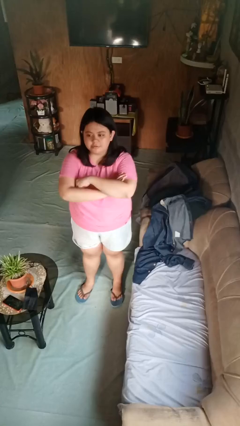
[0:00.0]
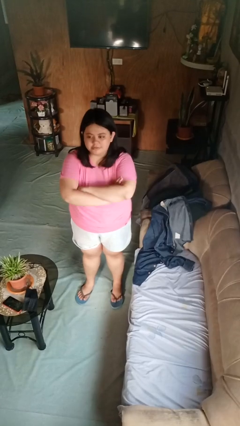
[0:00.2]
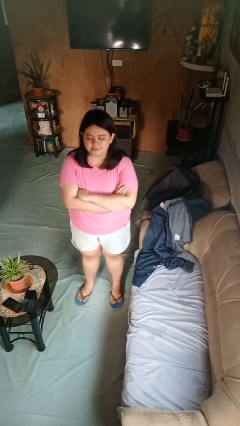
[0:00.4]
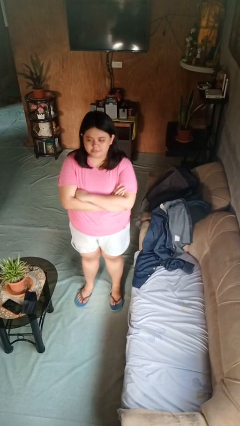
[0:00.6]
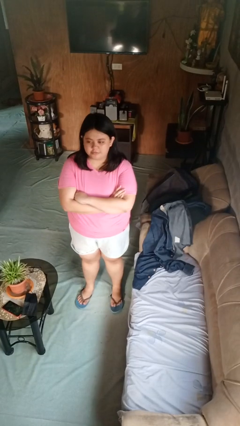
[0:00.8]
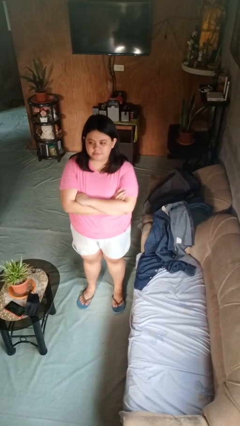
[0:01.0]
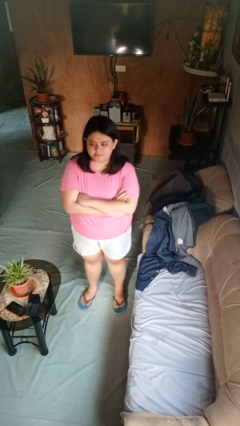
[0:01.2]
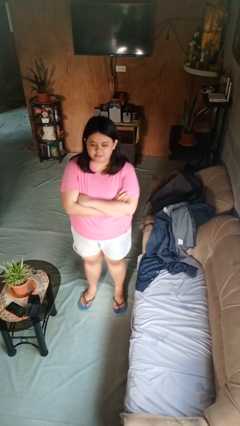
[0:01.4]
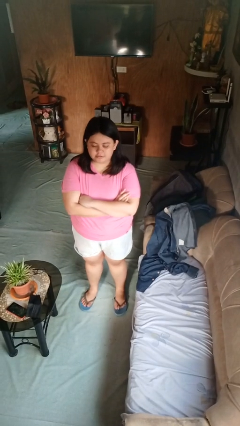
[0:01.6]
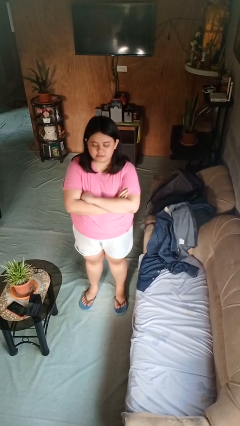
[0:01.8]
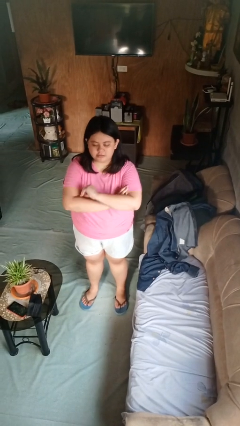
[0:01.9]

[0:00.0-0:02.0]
person crosses arms

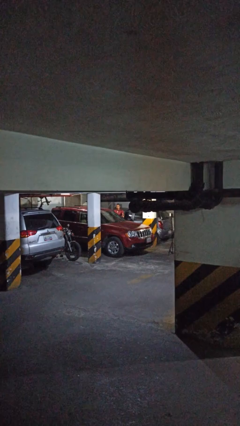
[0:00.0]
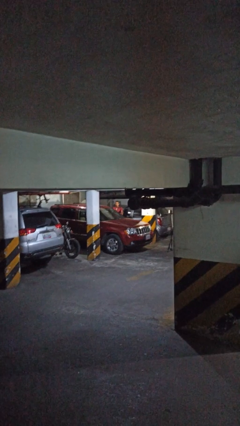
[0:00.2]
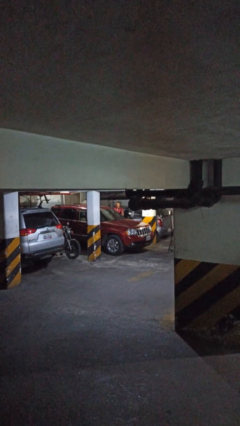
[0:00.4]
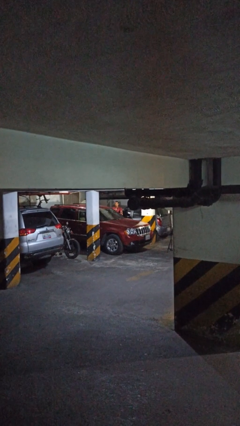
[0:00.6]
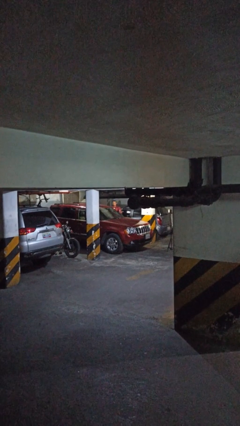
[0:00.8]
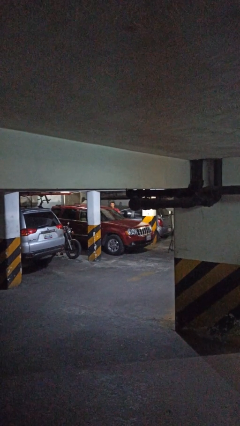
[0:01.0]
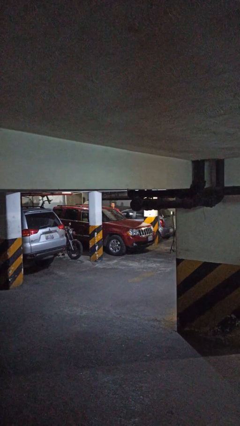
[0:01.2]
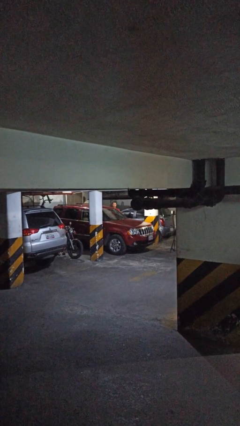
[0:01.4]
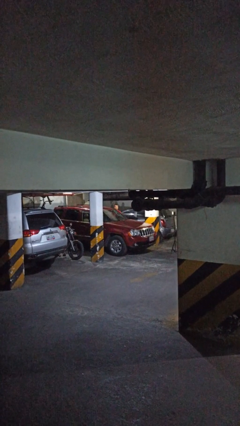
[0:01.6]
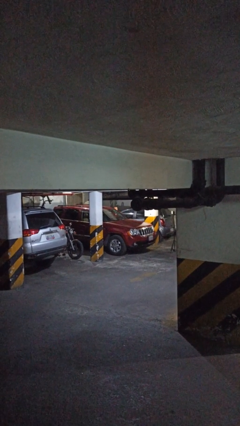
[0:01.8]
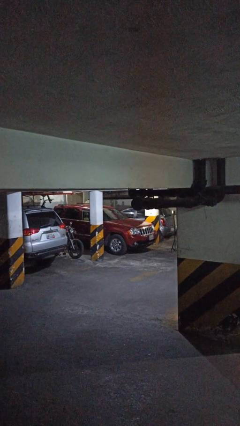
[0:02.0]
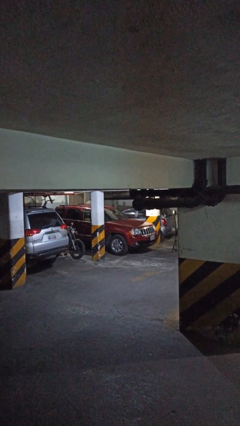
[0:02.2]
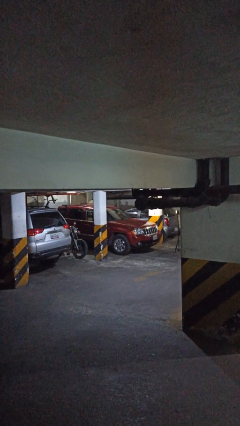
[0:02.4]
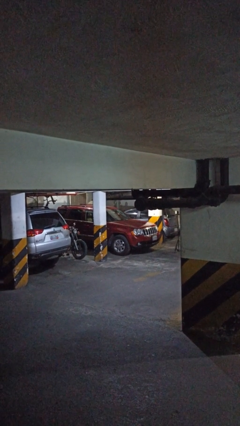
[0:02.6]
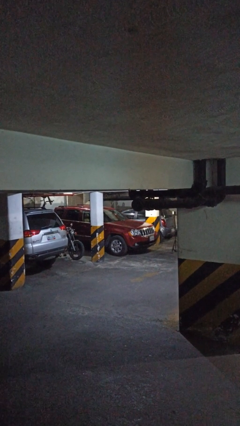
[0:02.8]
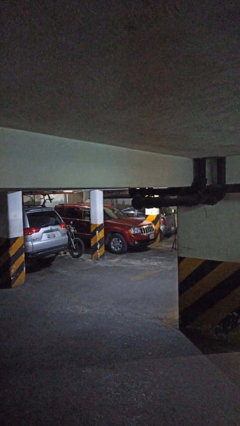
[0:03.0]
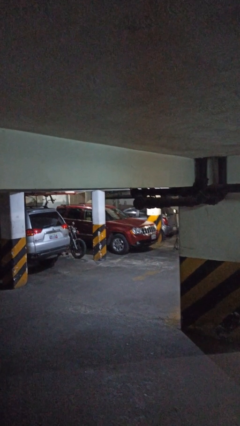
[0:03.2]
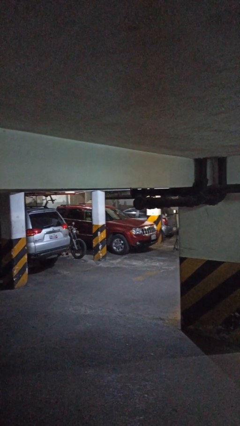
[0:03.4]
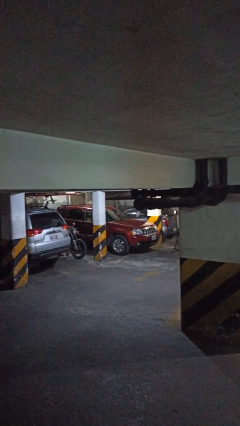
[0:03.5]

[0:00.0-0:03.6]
person enters car

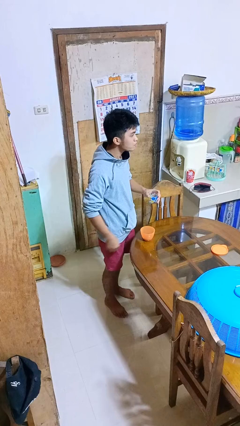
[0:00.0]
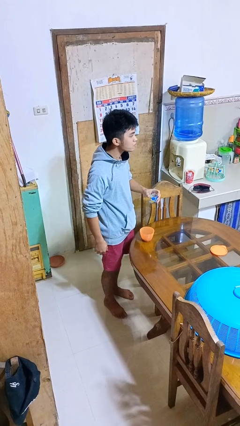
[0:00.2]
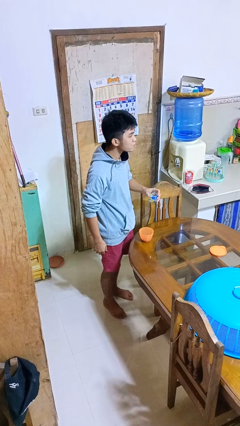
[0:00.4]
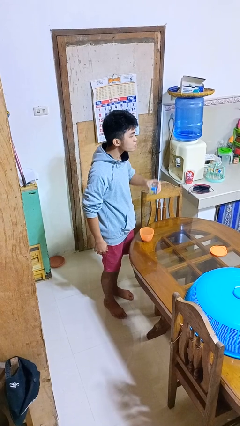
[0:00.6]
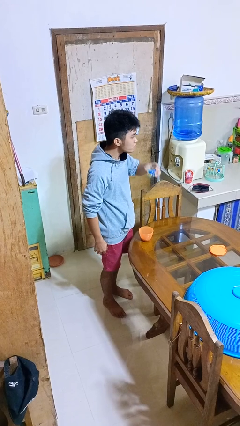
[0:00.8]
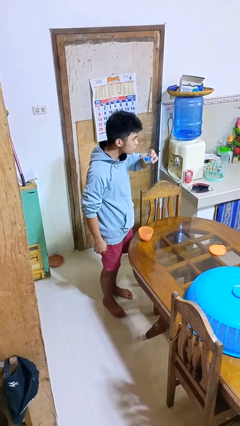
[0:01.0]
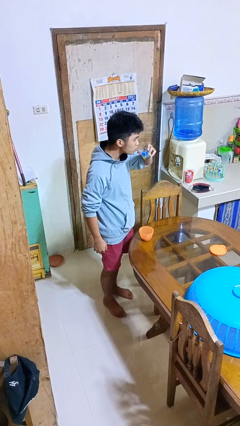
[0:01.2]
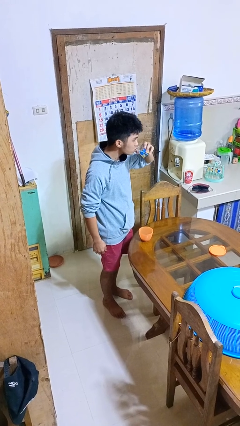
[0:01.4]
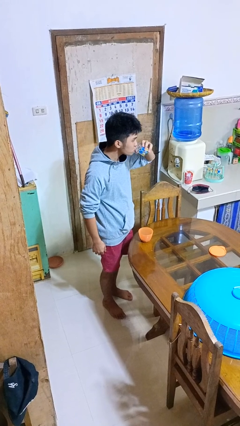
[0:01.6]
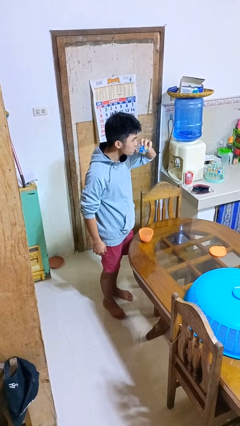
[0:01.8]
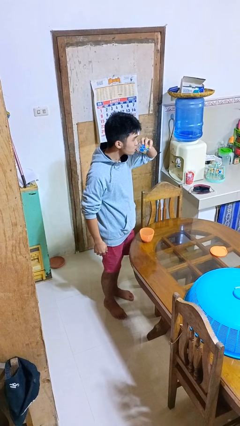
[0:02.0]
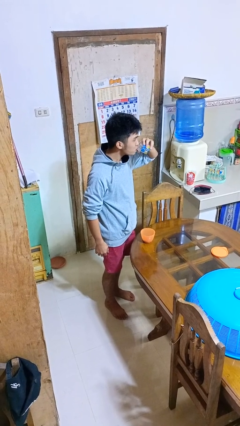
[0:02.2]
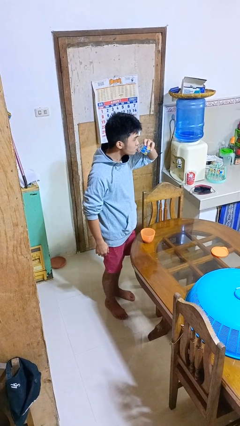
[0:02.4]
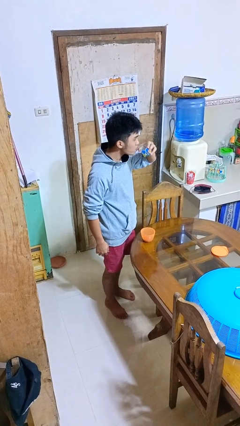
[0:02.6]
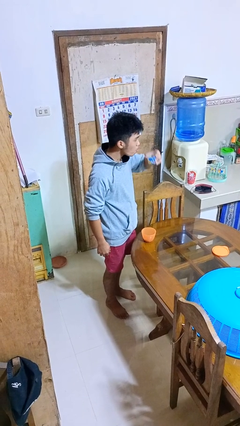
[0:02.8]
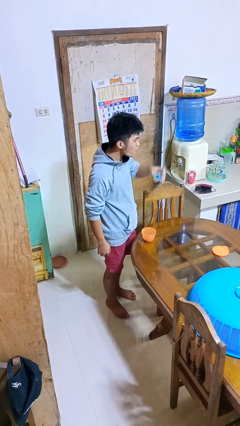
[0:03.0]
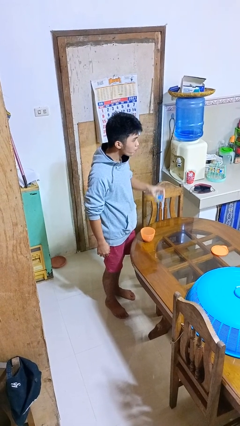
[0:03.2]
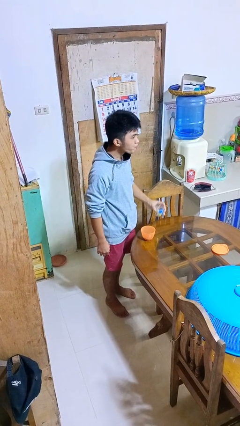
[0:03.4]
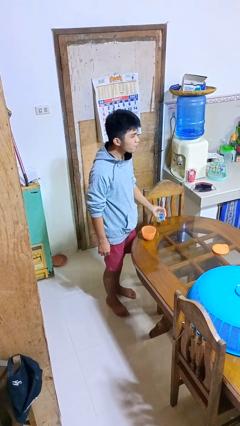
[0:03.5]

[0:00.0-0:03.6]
person drinks from cup

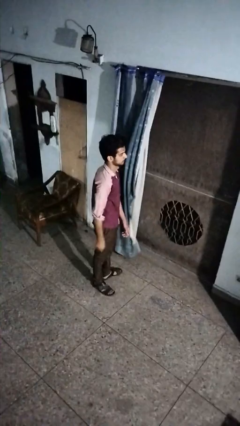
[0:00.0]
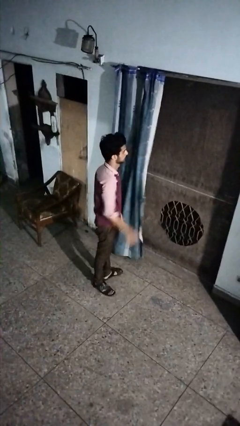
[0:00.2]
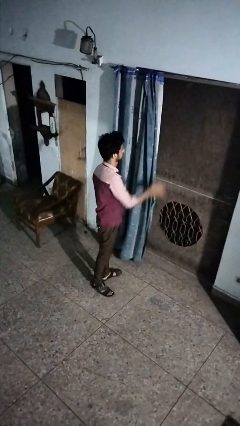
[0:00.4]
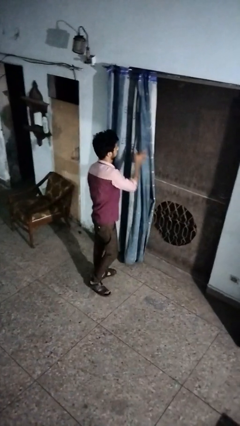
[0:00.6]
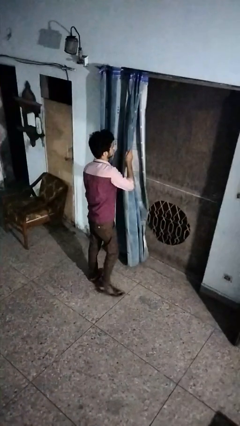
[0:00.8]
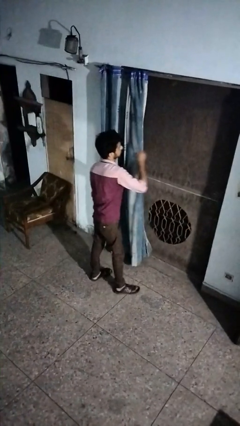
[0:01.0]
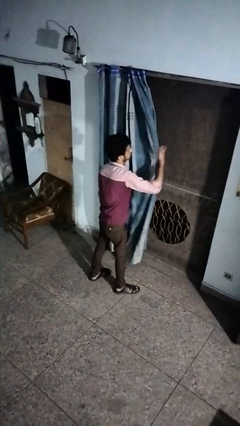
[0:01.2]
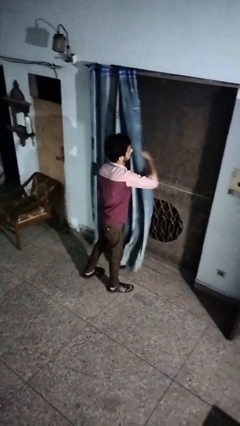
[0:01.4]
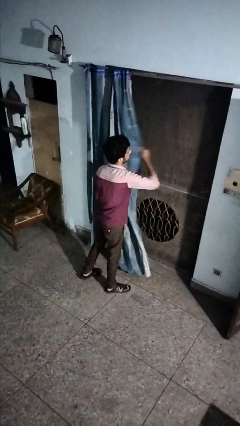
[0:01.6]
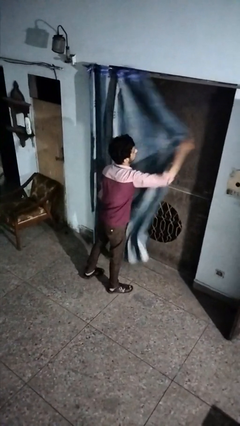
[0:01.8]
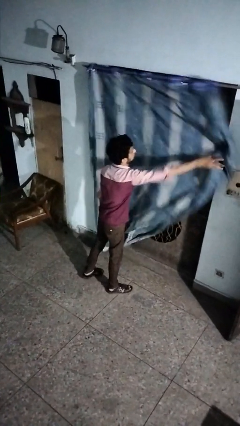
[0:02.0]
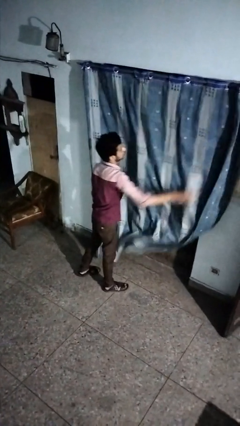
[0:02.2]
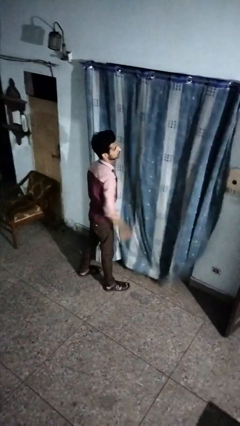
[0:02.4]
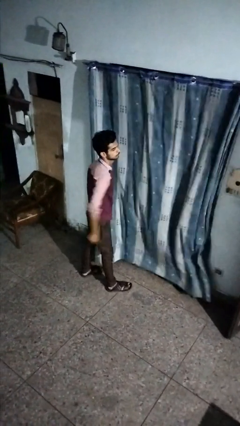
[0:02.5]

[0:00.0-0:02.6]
person closes curtains

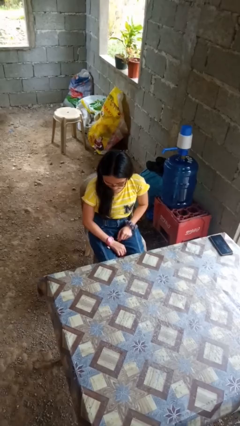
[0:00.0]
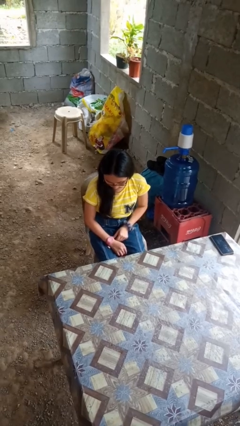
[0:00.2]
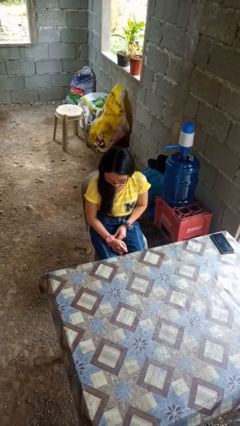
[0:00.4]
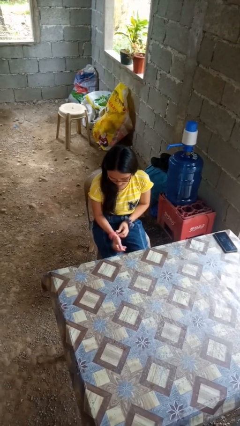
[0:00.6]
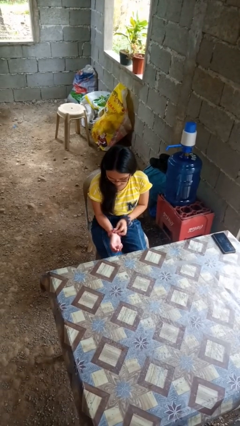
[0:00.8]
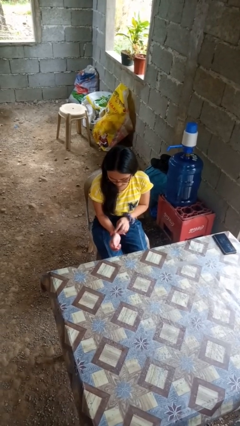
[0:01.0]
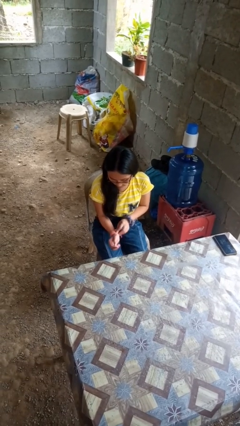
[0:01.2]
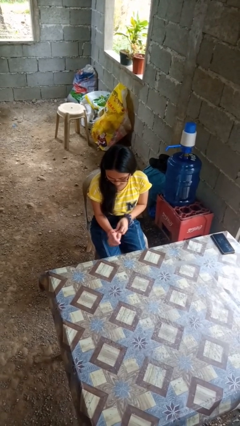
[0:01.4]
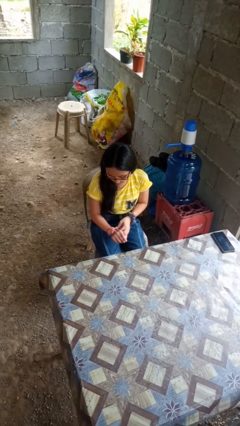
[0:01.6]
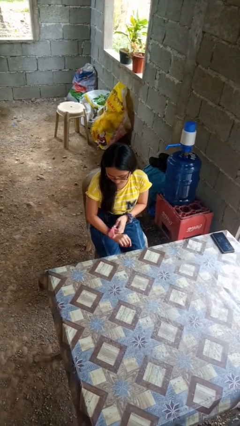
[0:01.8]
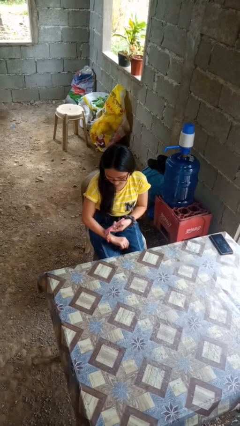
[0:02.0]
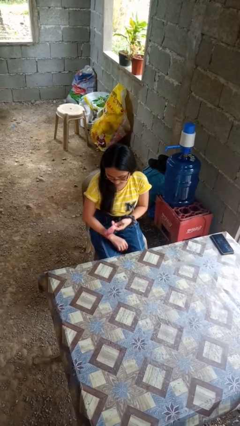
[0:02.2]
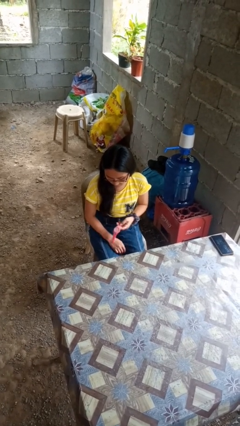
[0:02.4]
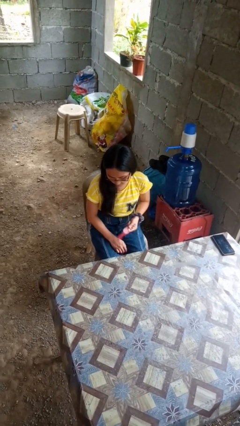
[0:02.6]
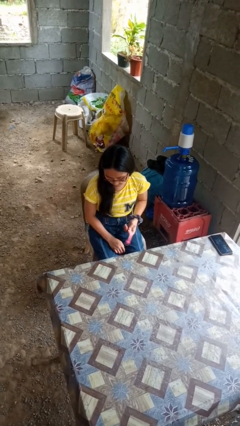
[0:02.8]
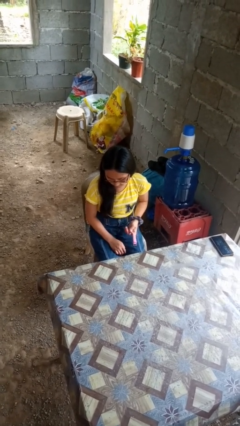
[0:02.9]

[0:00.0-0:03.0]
person takes off wristwatch

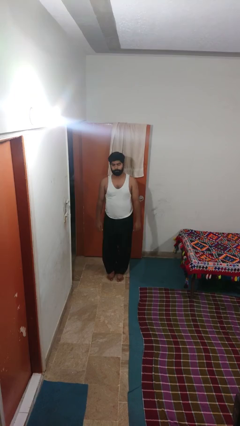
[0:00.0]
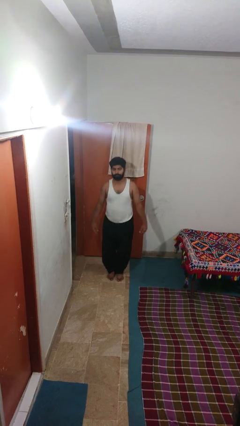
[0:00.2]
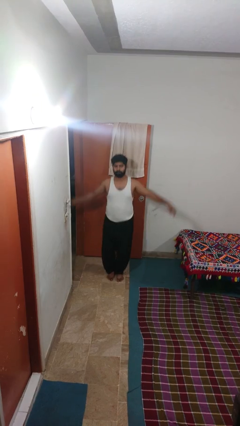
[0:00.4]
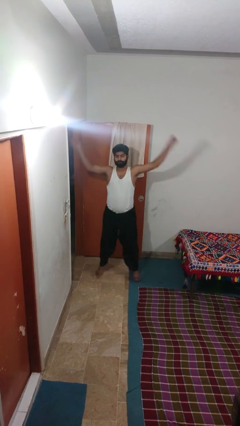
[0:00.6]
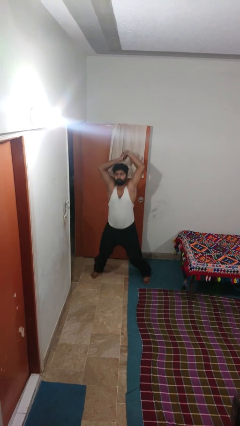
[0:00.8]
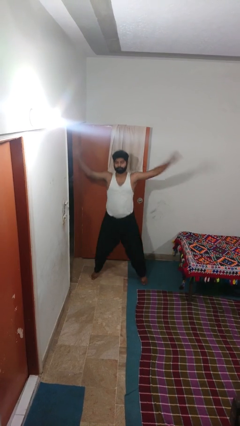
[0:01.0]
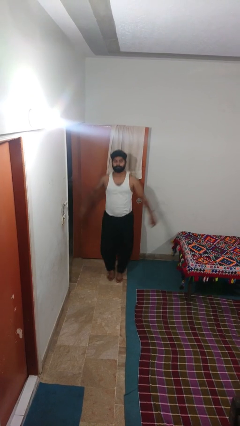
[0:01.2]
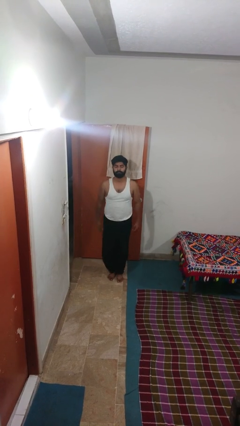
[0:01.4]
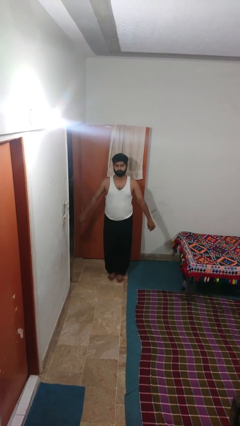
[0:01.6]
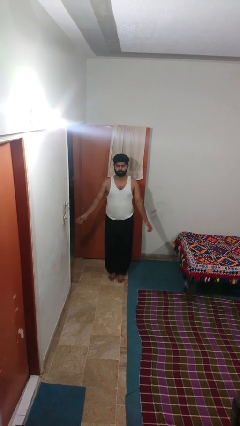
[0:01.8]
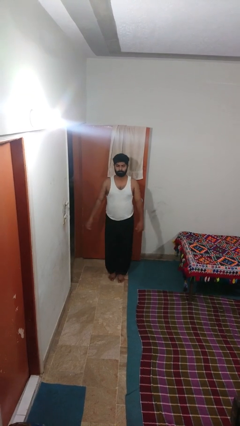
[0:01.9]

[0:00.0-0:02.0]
person exercises with jumping jacks

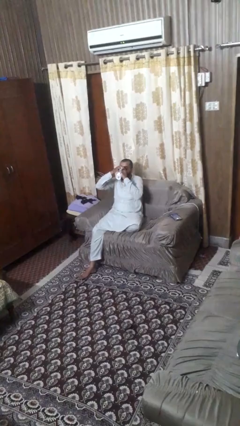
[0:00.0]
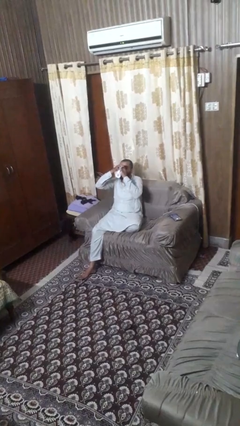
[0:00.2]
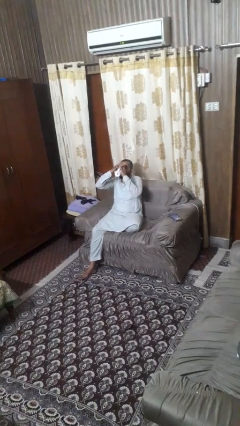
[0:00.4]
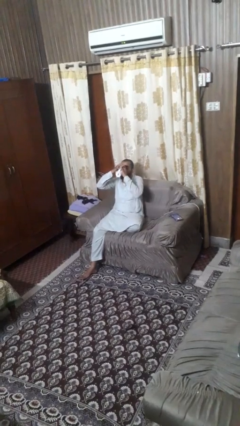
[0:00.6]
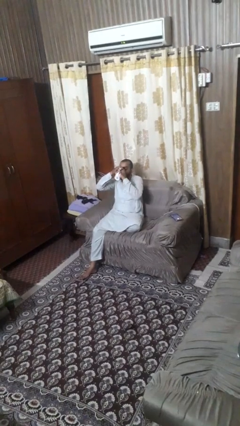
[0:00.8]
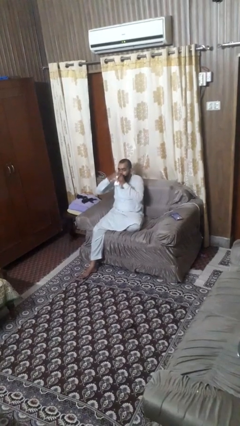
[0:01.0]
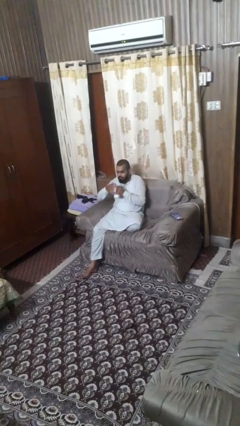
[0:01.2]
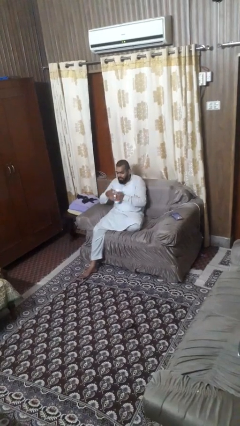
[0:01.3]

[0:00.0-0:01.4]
person drinks from mug
